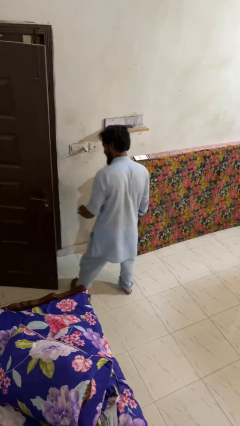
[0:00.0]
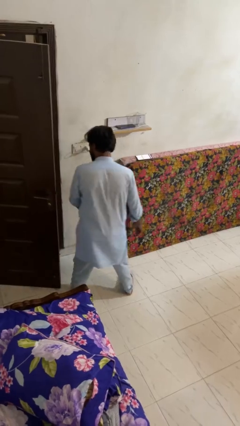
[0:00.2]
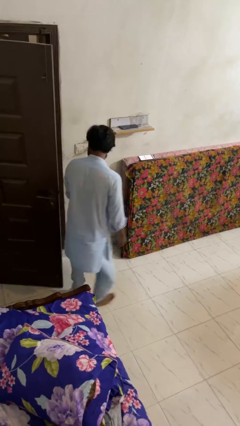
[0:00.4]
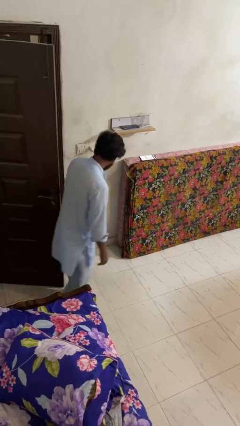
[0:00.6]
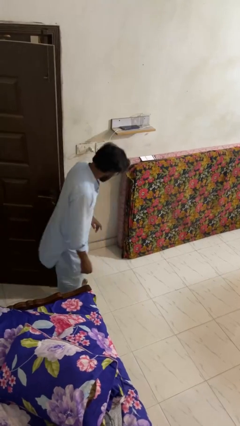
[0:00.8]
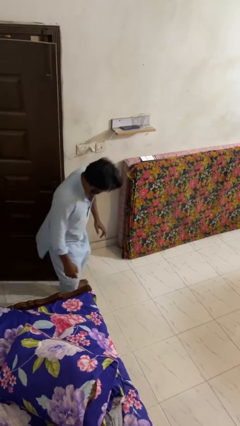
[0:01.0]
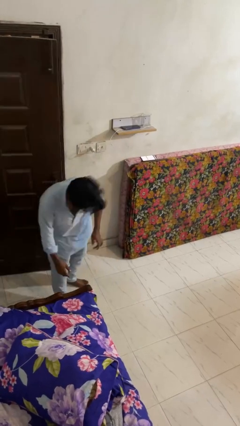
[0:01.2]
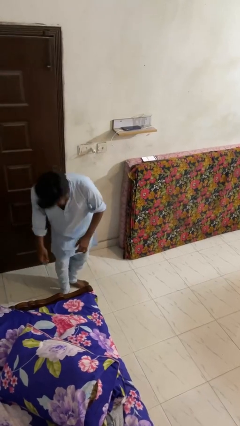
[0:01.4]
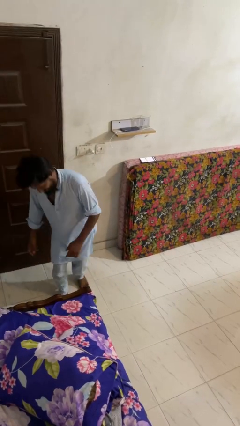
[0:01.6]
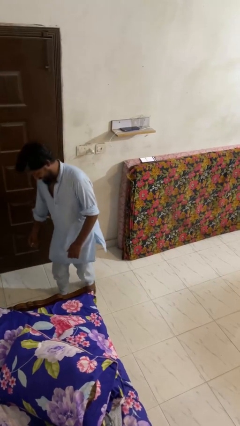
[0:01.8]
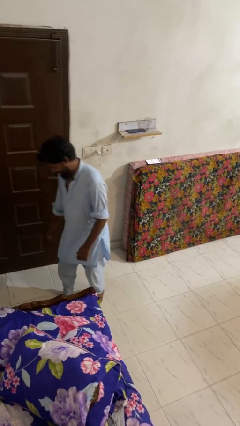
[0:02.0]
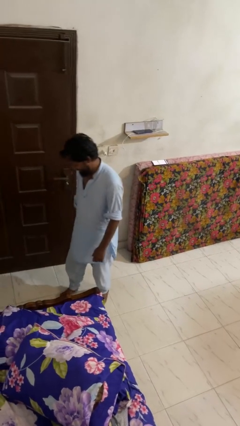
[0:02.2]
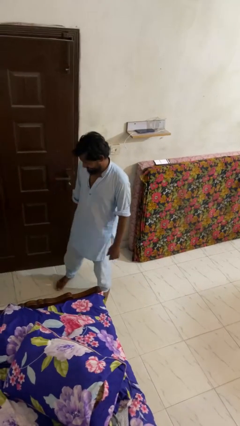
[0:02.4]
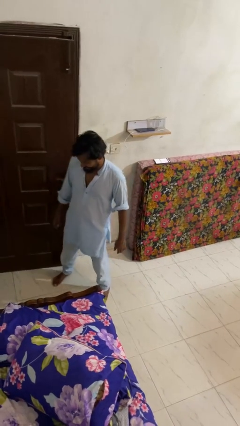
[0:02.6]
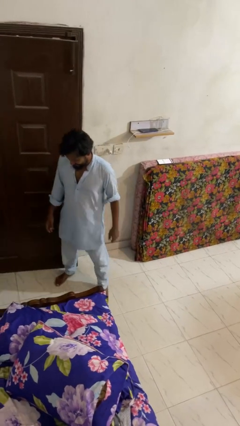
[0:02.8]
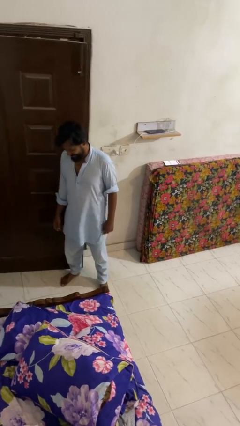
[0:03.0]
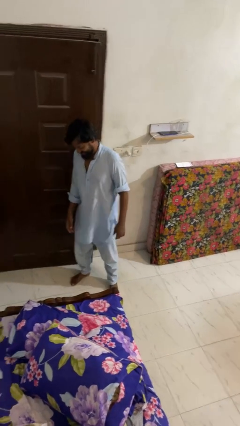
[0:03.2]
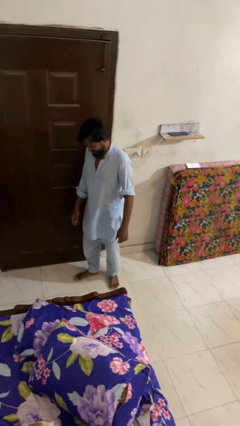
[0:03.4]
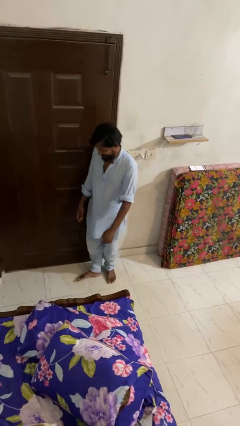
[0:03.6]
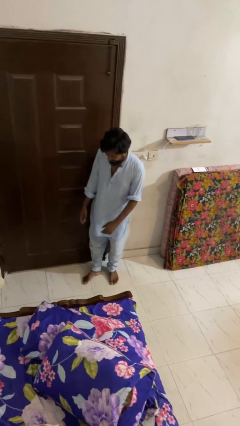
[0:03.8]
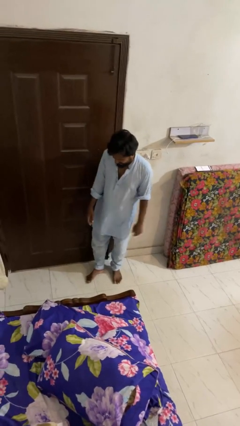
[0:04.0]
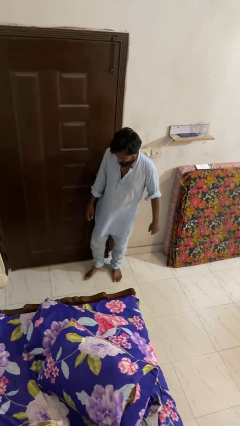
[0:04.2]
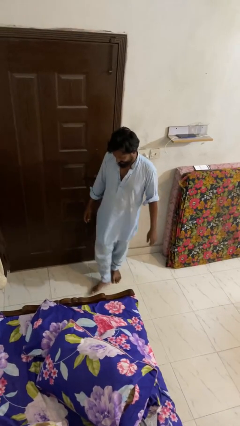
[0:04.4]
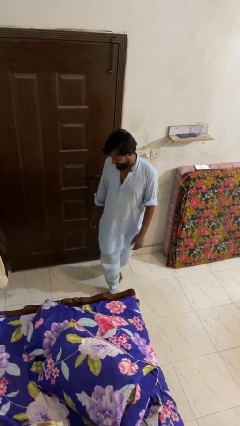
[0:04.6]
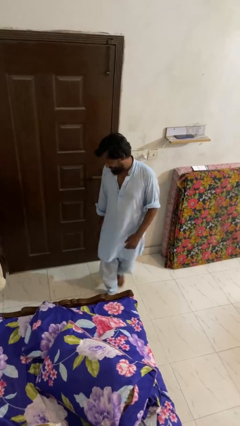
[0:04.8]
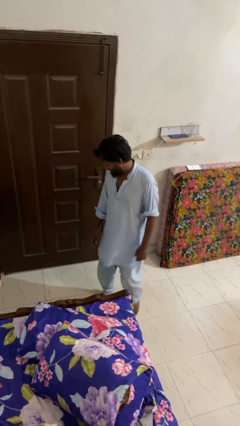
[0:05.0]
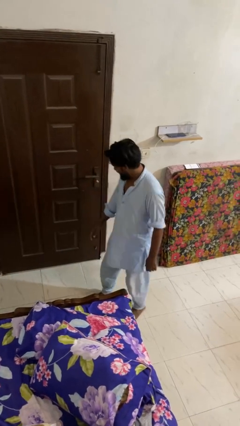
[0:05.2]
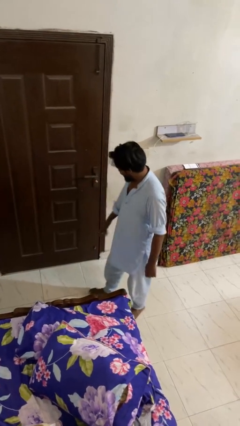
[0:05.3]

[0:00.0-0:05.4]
person closes door with hip

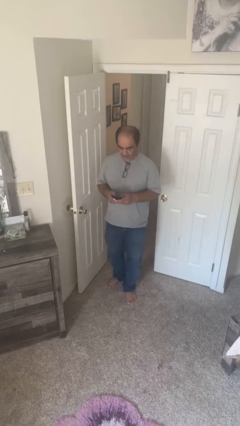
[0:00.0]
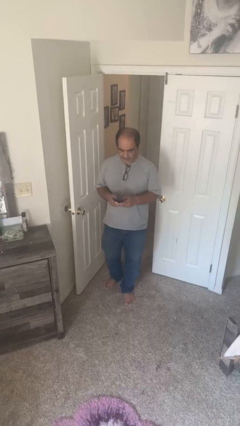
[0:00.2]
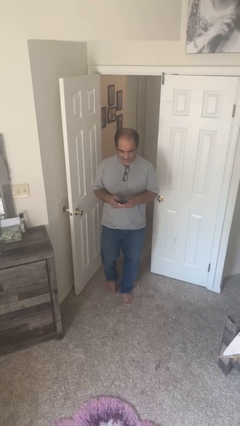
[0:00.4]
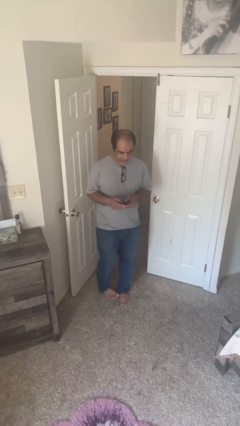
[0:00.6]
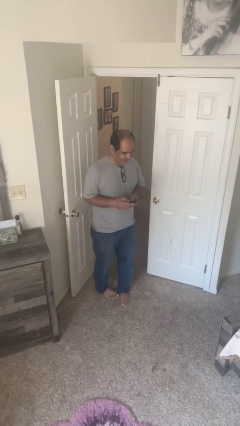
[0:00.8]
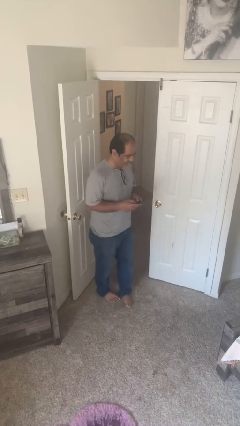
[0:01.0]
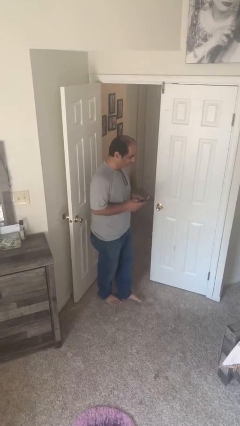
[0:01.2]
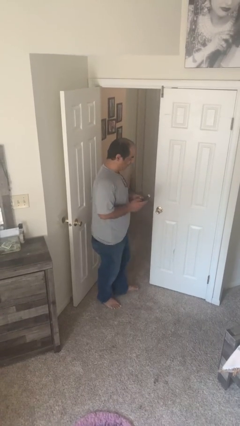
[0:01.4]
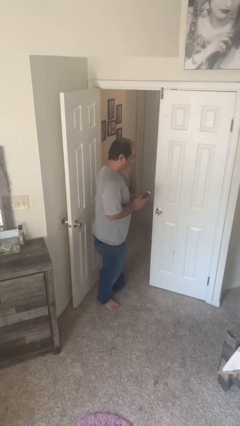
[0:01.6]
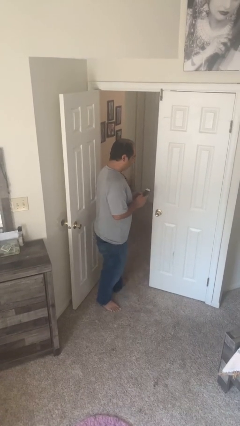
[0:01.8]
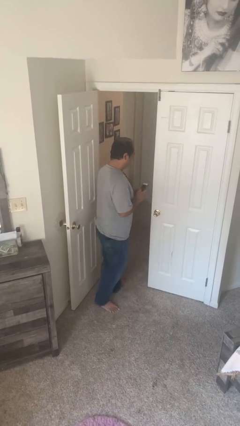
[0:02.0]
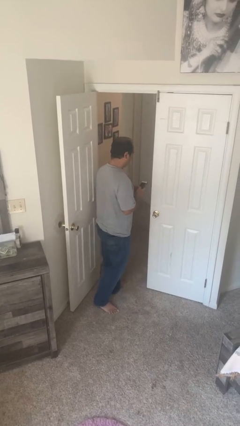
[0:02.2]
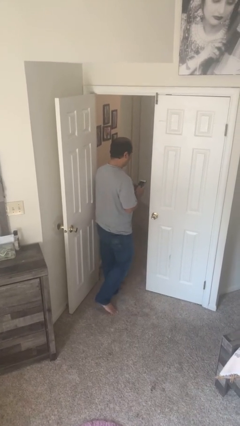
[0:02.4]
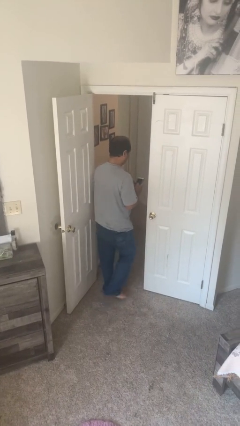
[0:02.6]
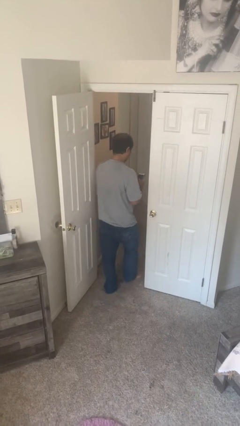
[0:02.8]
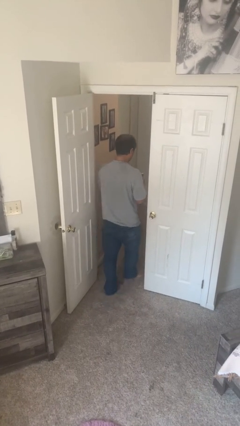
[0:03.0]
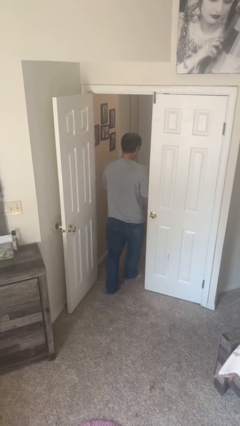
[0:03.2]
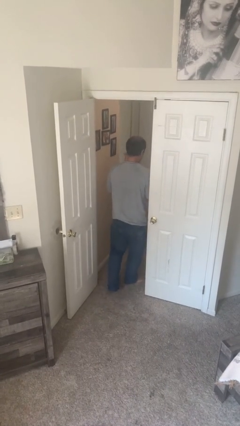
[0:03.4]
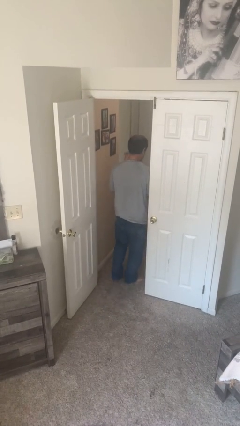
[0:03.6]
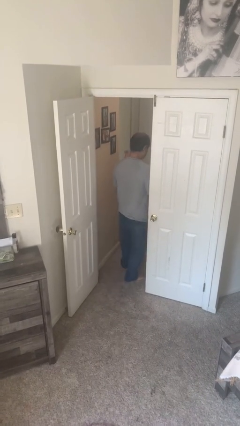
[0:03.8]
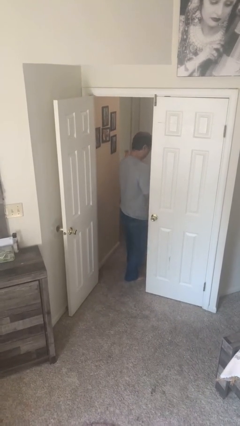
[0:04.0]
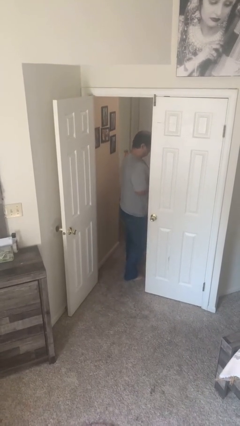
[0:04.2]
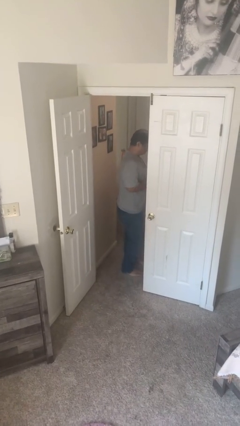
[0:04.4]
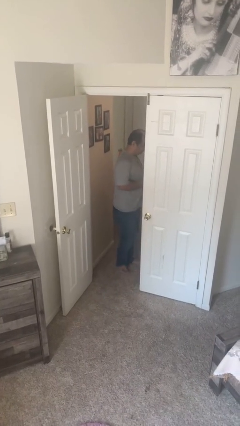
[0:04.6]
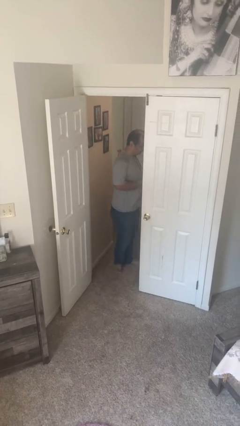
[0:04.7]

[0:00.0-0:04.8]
person exits scene through structure

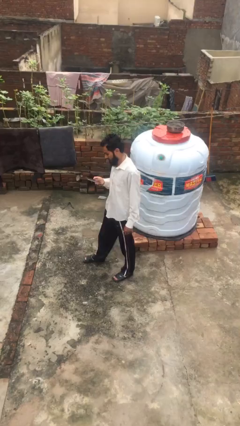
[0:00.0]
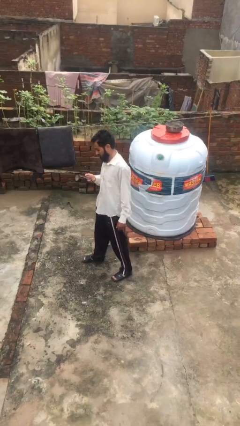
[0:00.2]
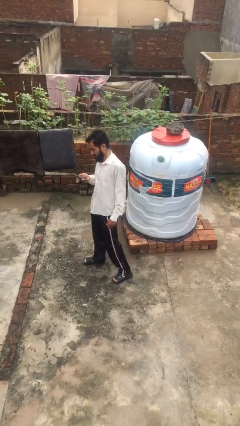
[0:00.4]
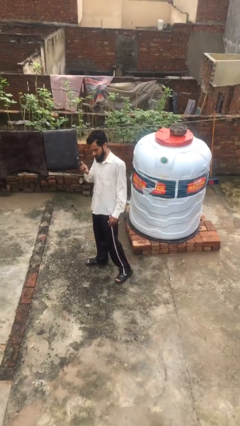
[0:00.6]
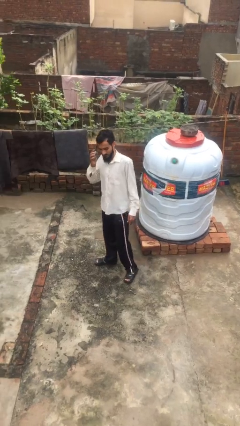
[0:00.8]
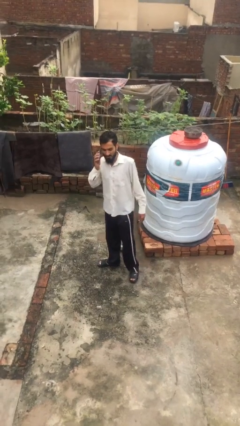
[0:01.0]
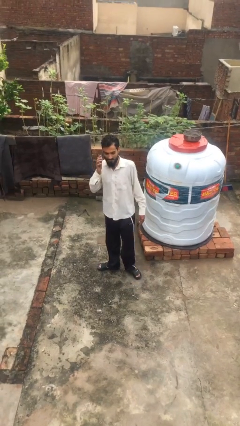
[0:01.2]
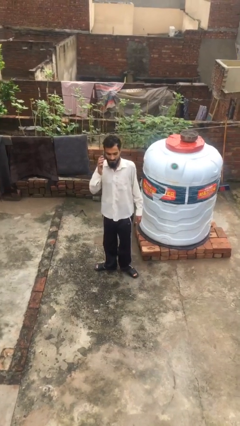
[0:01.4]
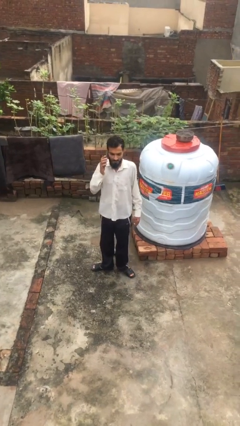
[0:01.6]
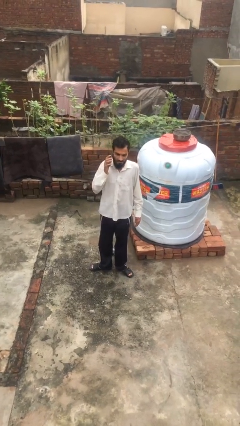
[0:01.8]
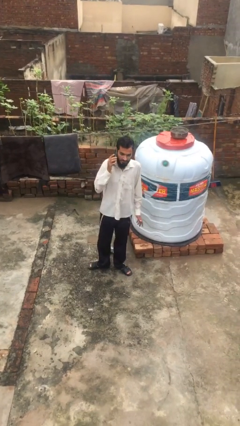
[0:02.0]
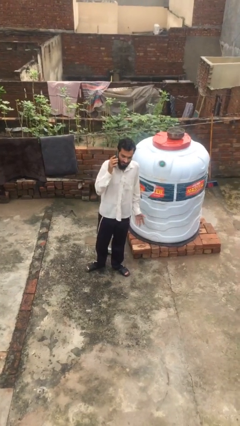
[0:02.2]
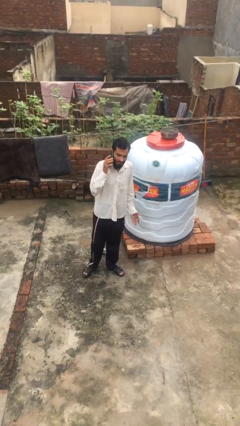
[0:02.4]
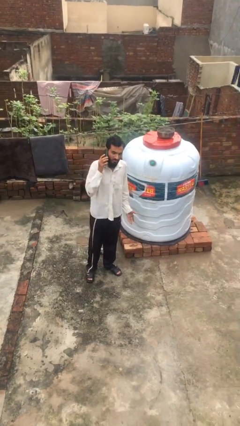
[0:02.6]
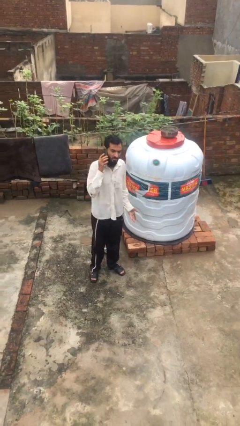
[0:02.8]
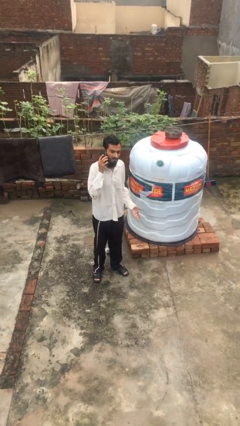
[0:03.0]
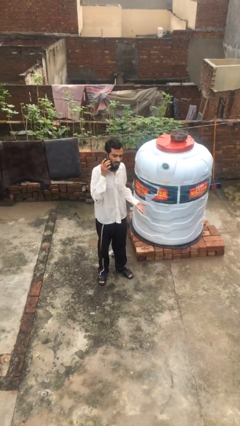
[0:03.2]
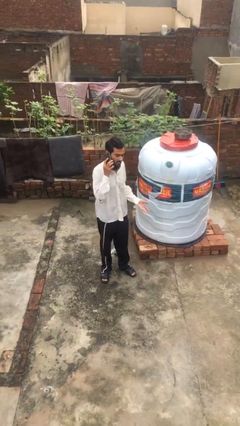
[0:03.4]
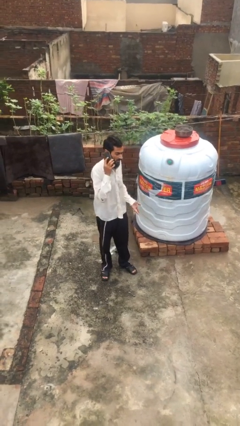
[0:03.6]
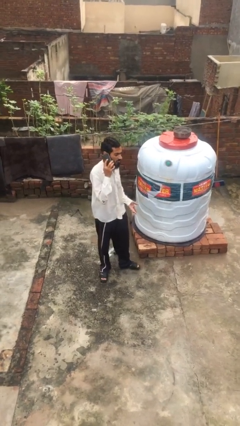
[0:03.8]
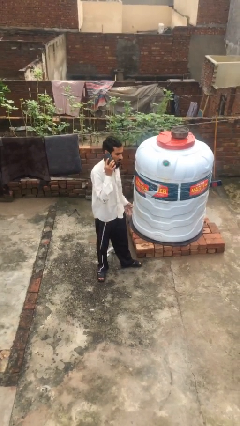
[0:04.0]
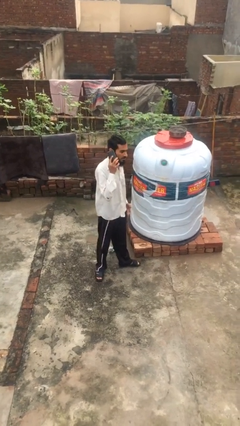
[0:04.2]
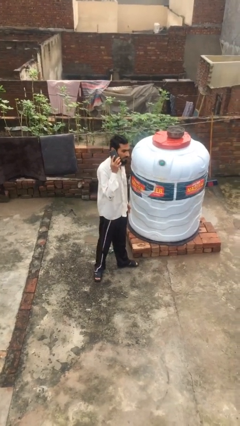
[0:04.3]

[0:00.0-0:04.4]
person talks on phone

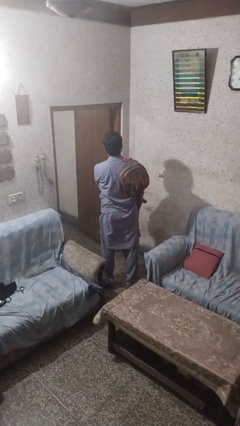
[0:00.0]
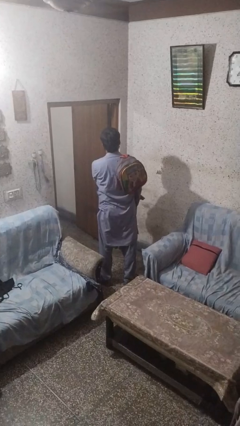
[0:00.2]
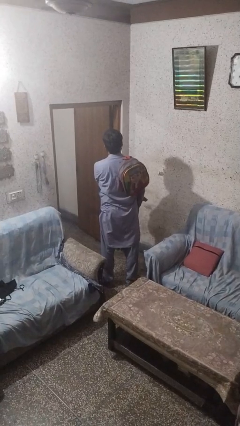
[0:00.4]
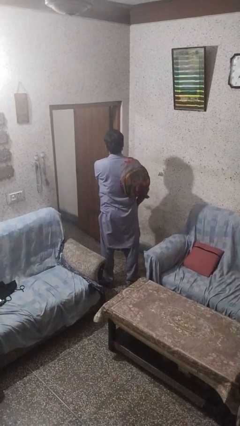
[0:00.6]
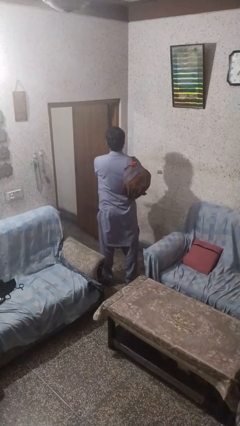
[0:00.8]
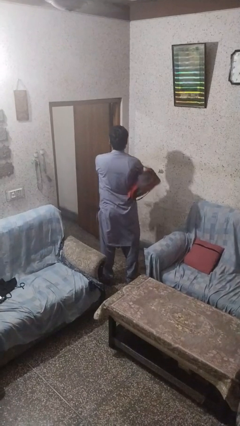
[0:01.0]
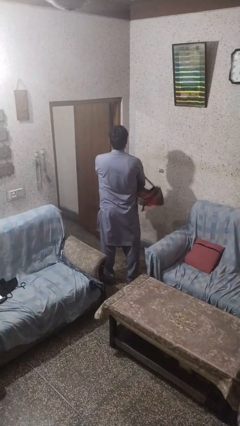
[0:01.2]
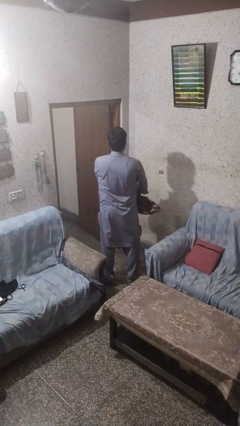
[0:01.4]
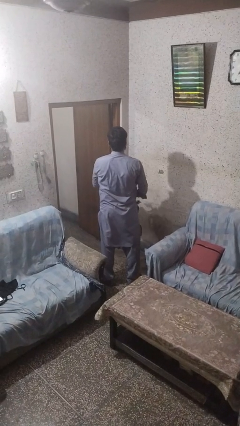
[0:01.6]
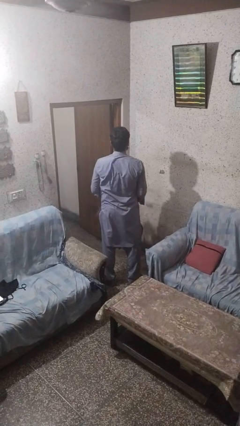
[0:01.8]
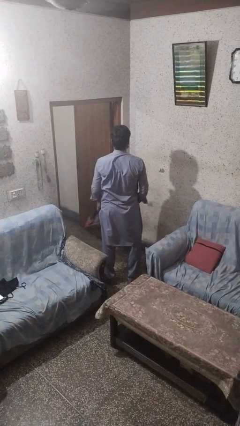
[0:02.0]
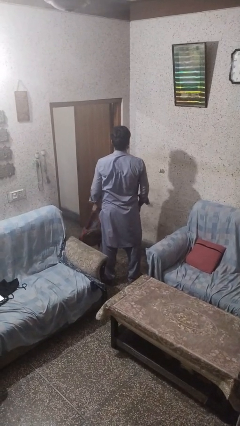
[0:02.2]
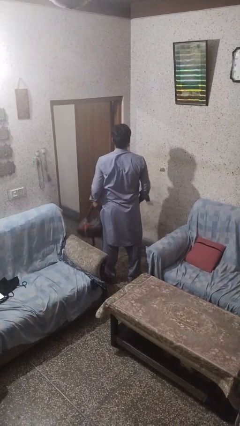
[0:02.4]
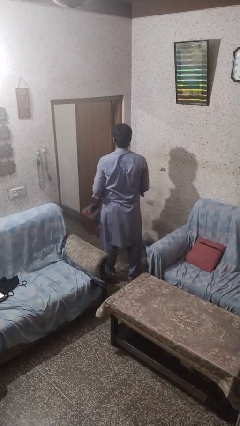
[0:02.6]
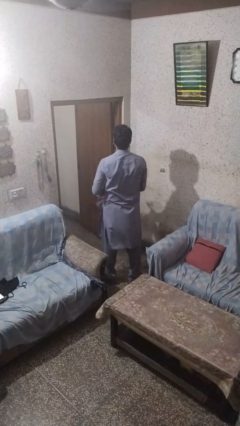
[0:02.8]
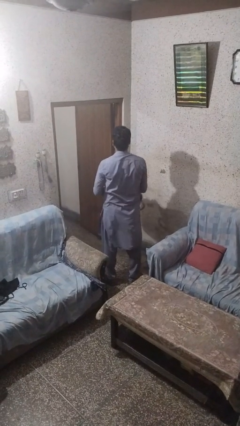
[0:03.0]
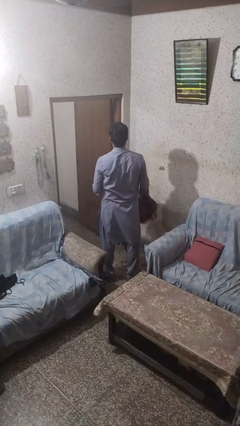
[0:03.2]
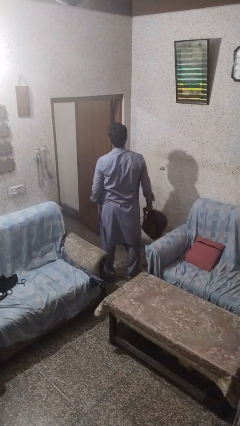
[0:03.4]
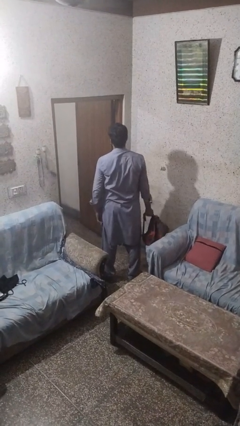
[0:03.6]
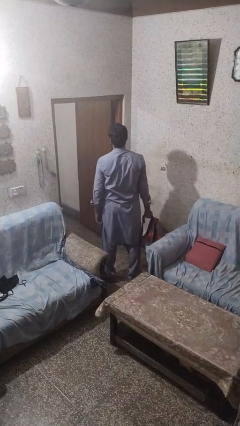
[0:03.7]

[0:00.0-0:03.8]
person takes off backpack
